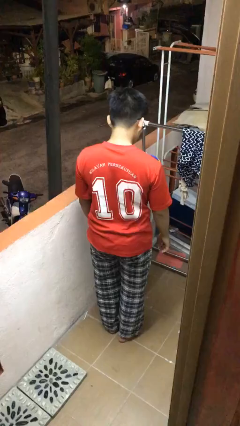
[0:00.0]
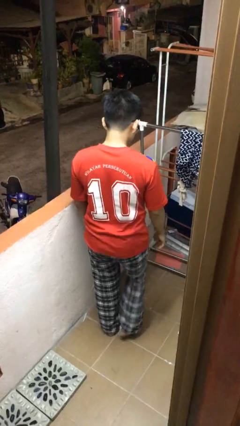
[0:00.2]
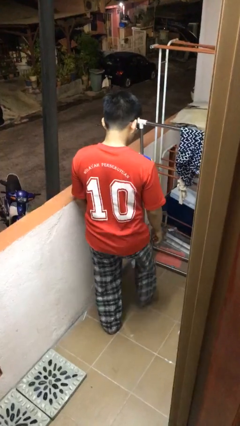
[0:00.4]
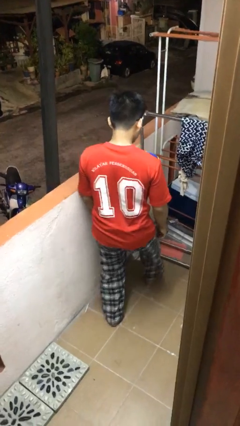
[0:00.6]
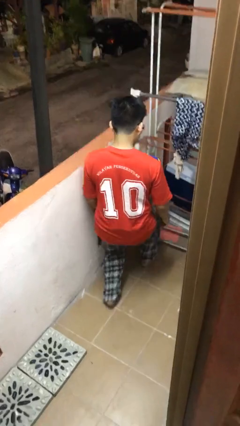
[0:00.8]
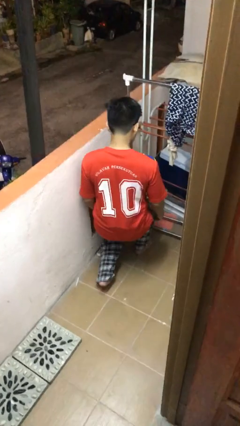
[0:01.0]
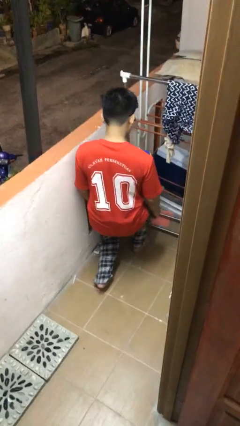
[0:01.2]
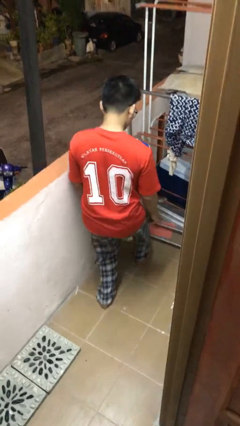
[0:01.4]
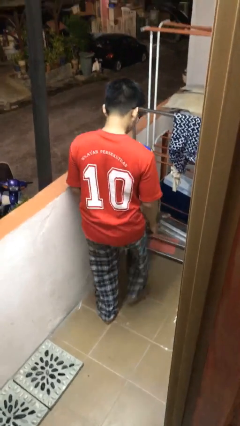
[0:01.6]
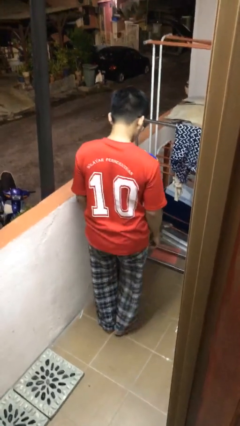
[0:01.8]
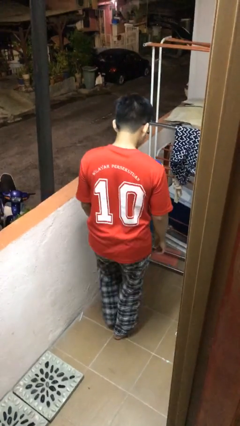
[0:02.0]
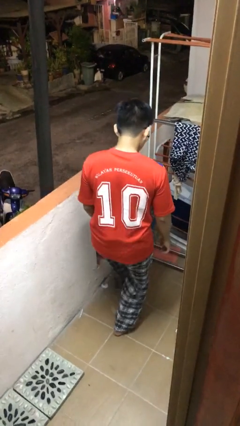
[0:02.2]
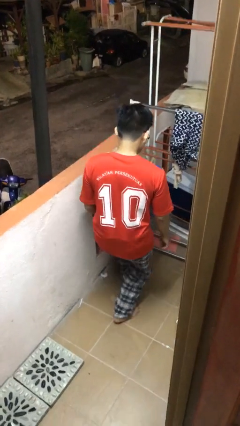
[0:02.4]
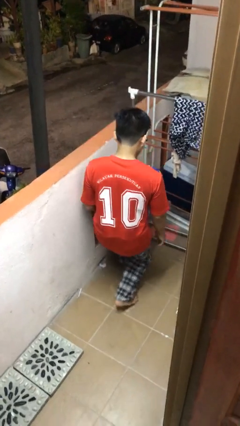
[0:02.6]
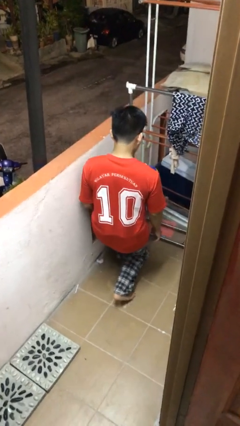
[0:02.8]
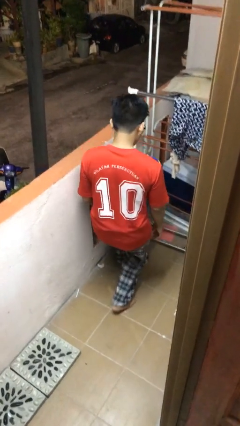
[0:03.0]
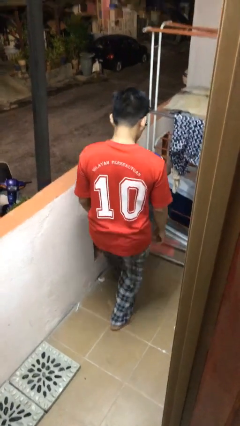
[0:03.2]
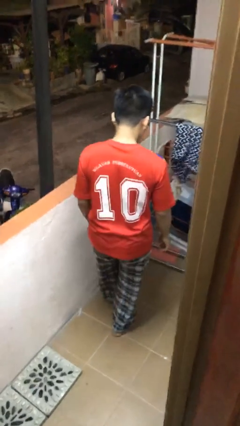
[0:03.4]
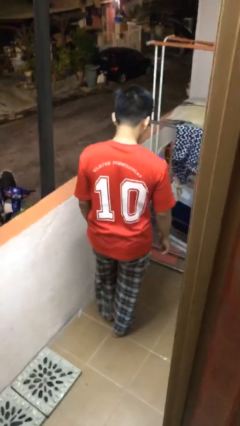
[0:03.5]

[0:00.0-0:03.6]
person exercises with lunges

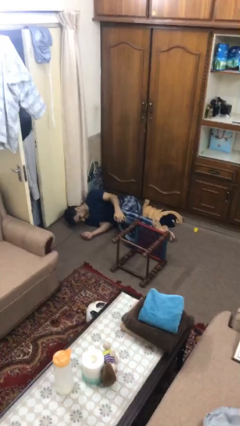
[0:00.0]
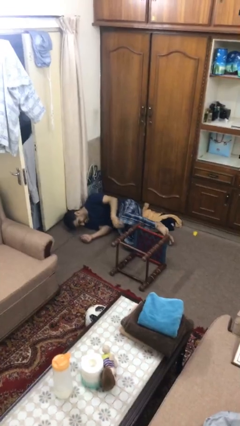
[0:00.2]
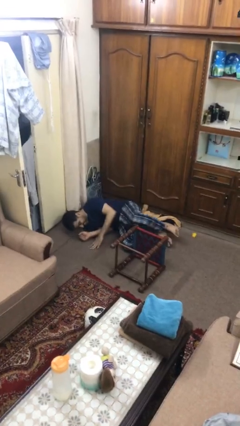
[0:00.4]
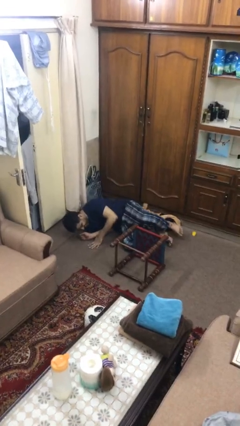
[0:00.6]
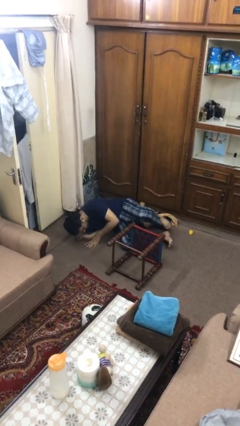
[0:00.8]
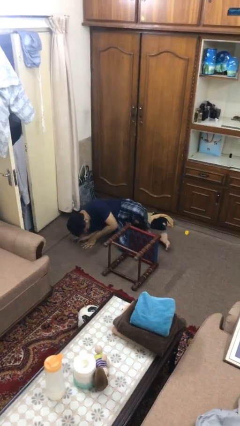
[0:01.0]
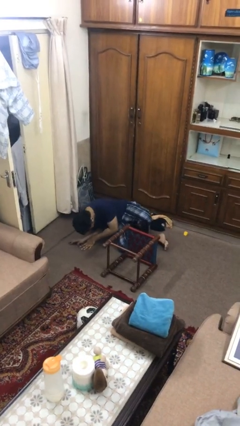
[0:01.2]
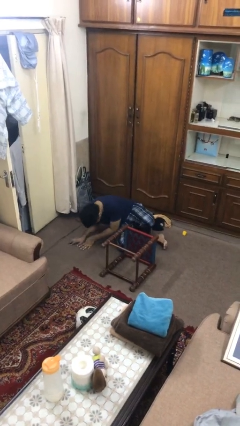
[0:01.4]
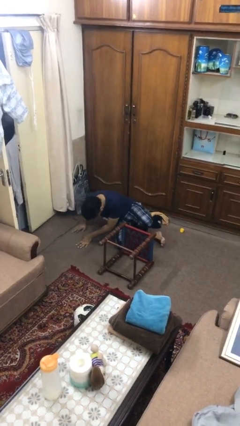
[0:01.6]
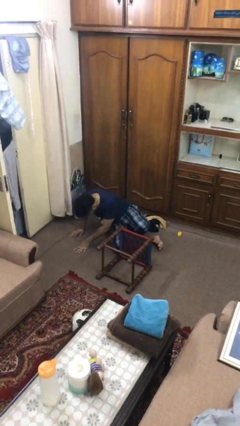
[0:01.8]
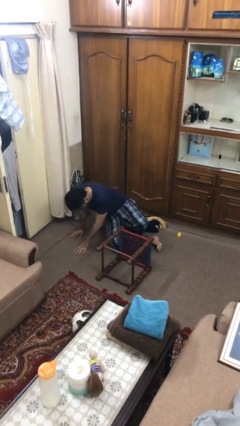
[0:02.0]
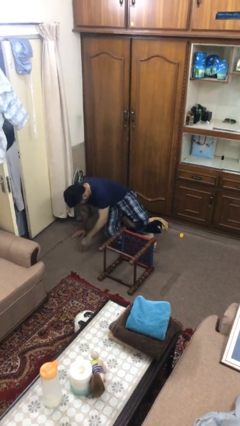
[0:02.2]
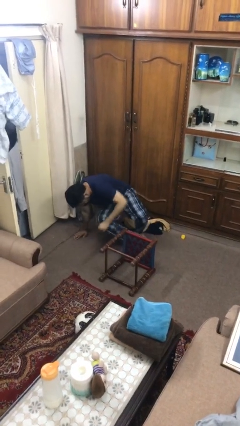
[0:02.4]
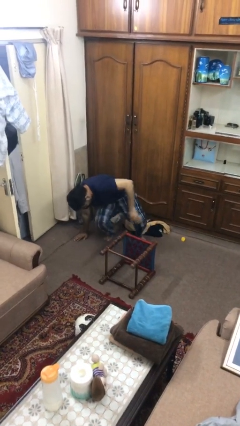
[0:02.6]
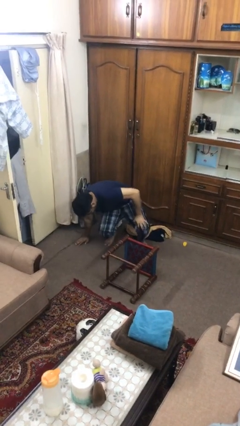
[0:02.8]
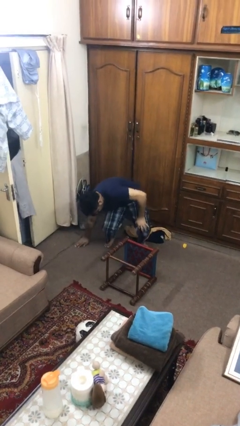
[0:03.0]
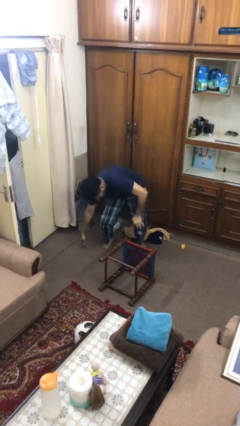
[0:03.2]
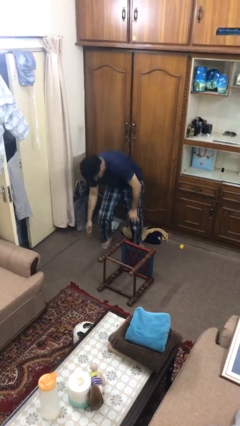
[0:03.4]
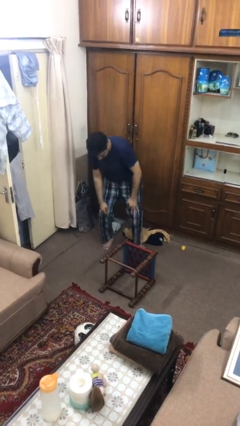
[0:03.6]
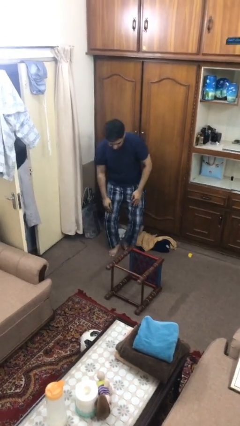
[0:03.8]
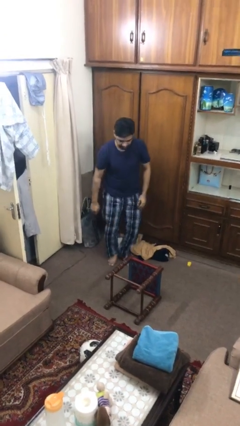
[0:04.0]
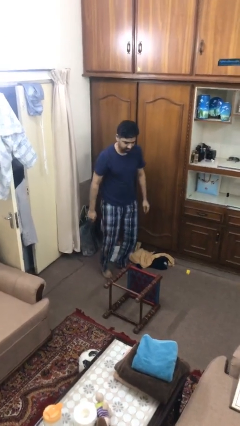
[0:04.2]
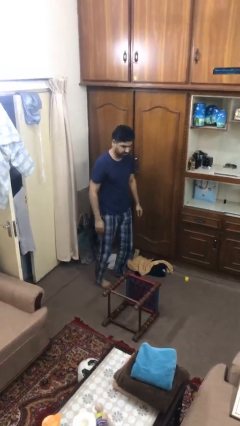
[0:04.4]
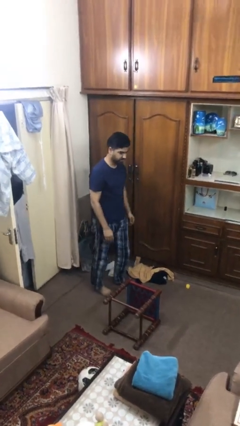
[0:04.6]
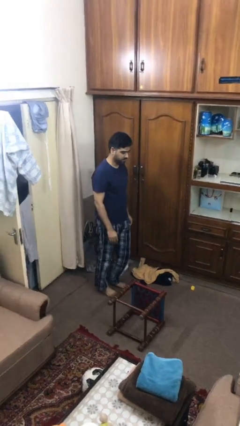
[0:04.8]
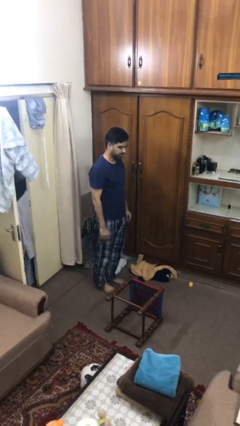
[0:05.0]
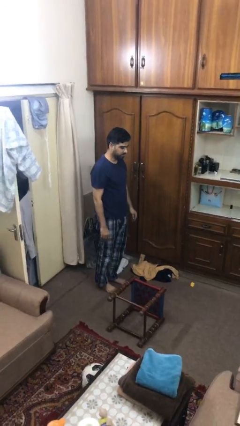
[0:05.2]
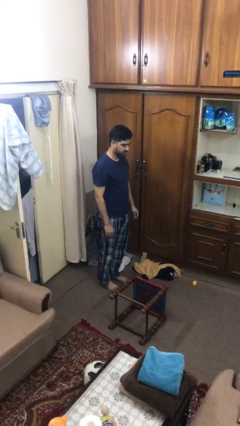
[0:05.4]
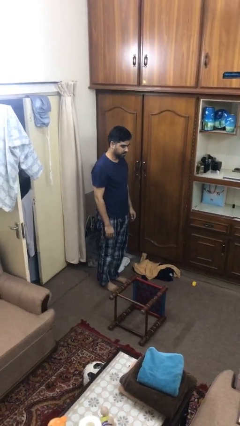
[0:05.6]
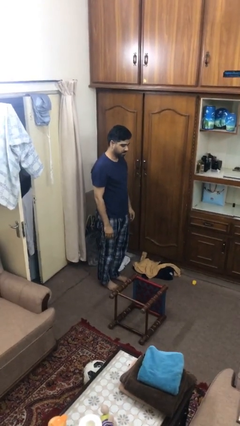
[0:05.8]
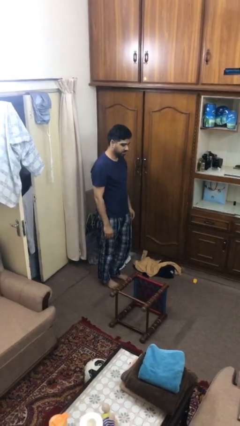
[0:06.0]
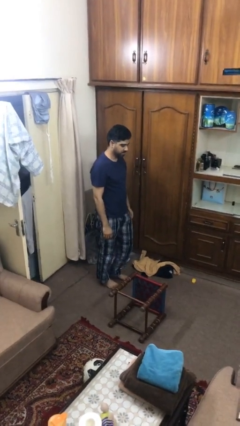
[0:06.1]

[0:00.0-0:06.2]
person stands up from floor

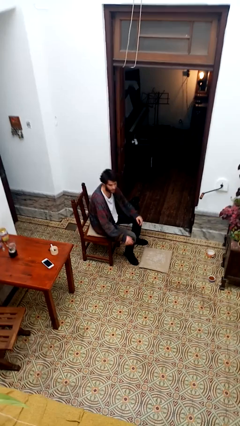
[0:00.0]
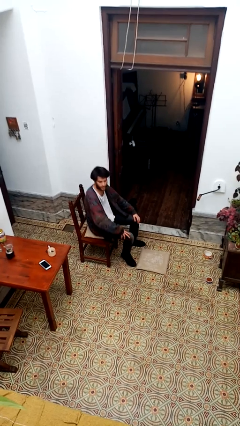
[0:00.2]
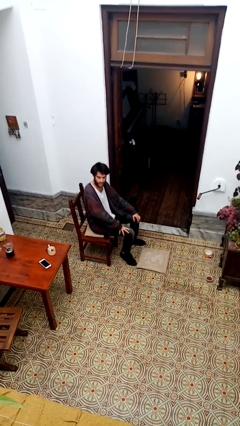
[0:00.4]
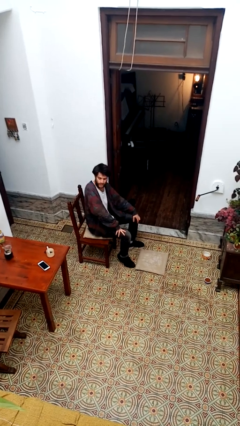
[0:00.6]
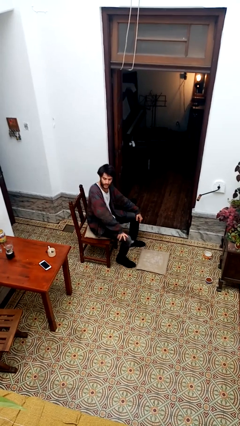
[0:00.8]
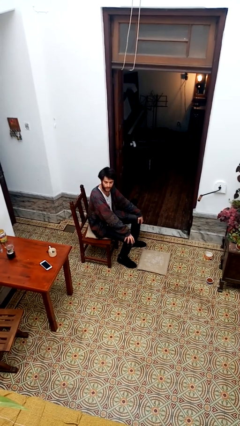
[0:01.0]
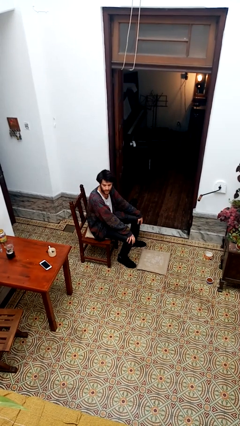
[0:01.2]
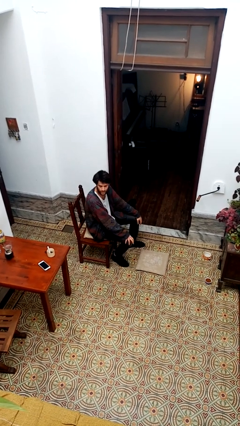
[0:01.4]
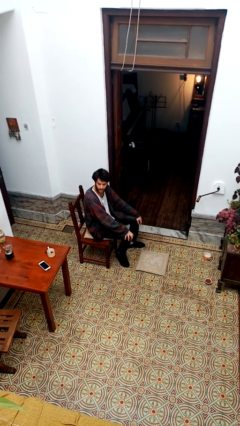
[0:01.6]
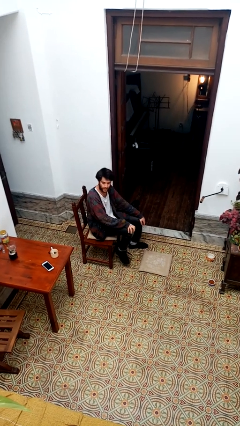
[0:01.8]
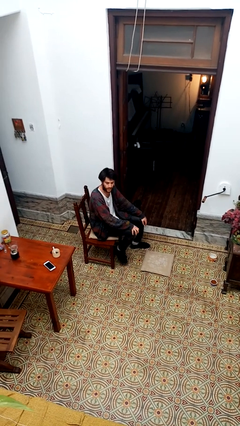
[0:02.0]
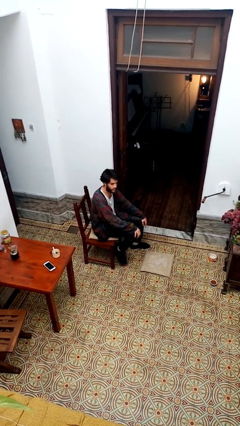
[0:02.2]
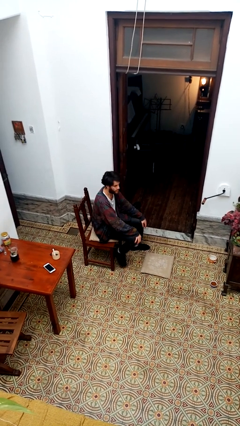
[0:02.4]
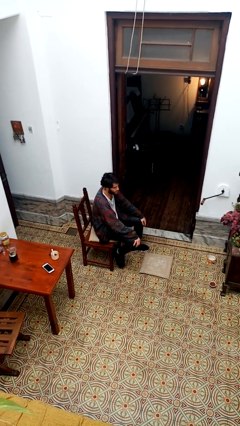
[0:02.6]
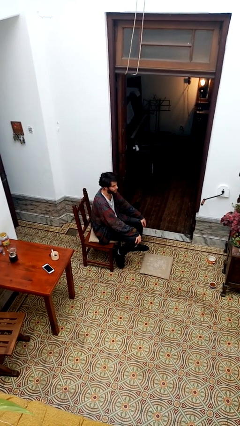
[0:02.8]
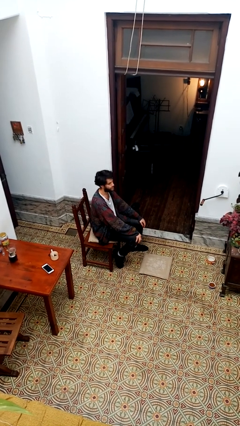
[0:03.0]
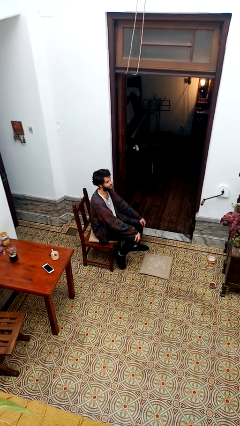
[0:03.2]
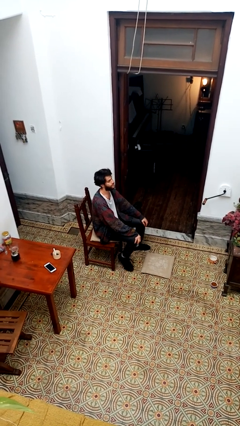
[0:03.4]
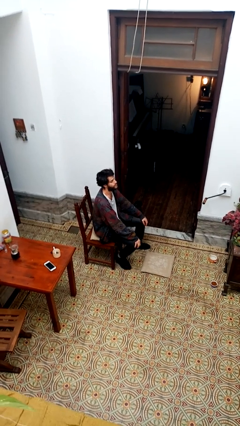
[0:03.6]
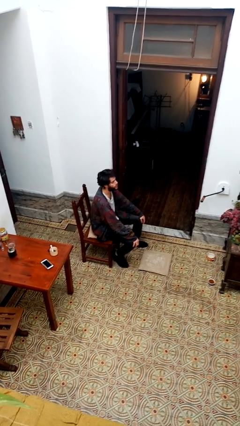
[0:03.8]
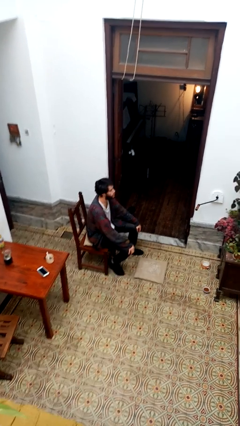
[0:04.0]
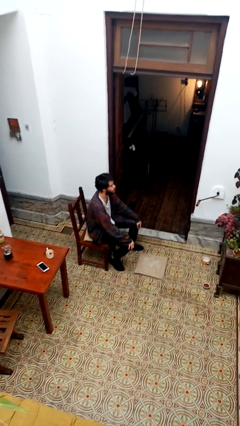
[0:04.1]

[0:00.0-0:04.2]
person sits down

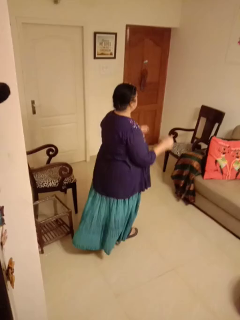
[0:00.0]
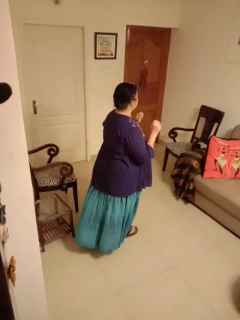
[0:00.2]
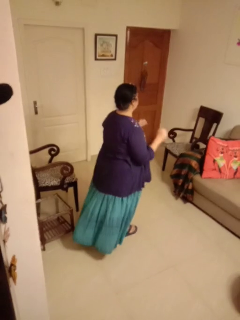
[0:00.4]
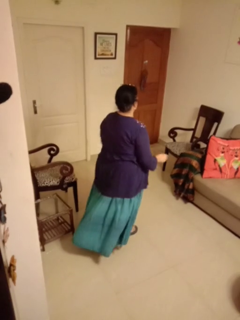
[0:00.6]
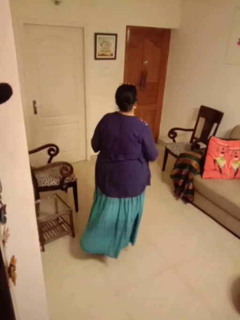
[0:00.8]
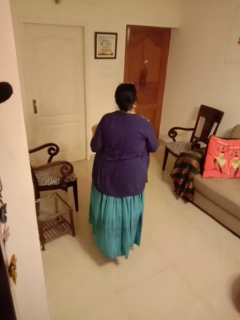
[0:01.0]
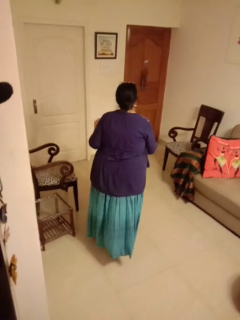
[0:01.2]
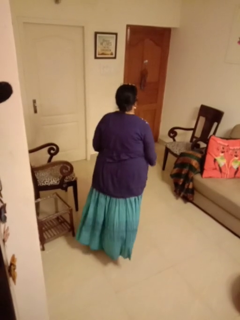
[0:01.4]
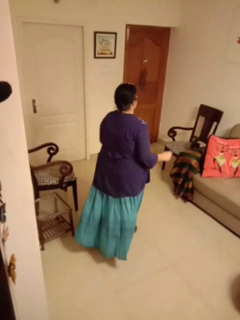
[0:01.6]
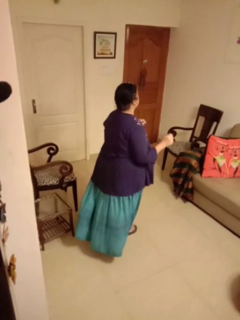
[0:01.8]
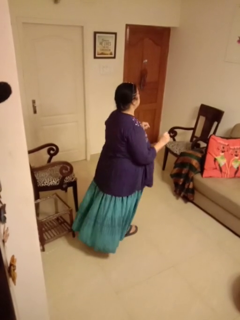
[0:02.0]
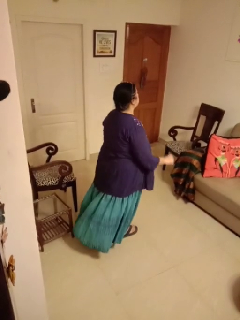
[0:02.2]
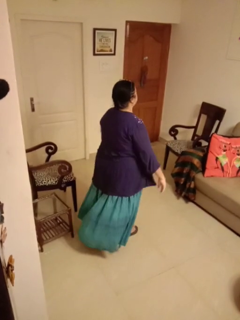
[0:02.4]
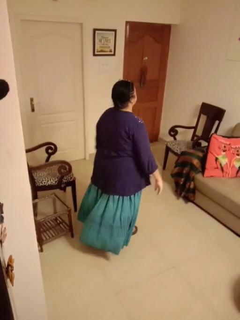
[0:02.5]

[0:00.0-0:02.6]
person dances in place

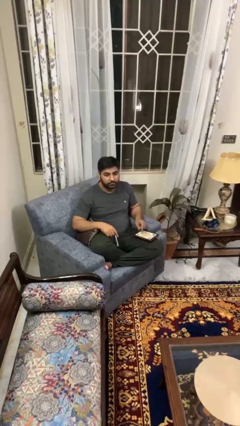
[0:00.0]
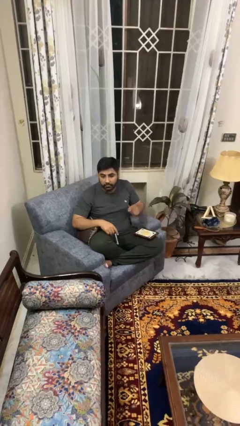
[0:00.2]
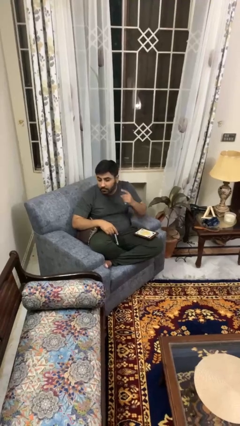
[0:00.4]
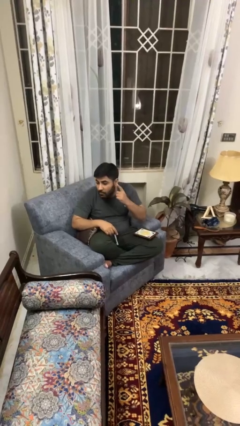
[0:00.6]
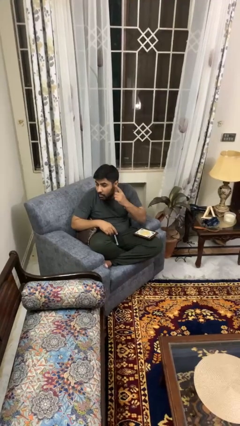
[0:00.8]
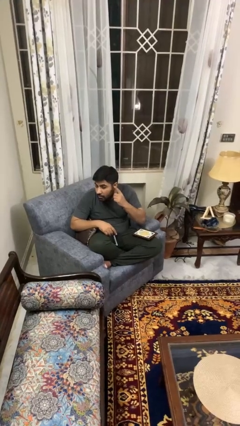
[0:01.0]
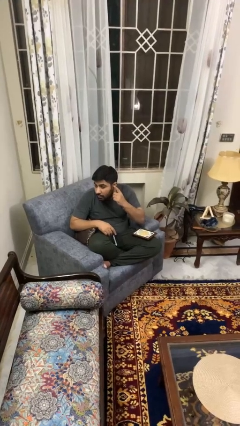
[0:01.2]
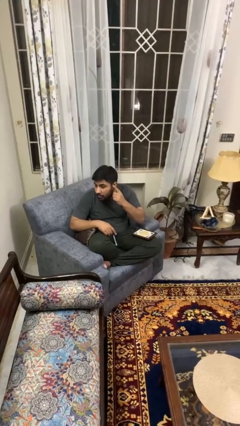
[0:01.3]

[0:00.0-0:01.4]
person gestures listen closely
